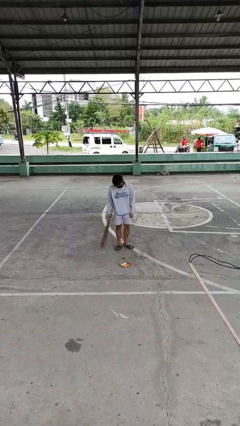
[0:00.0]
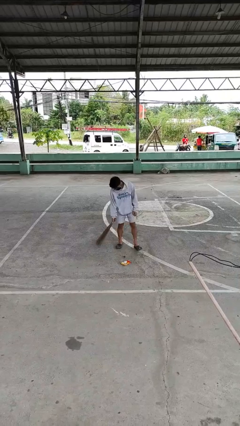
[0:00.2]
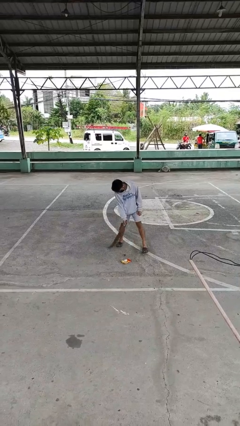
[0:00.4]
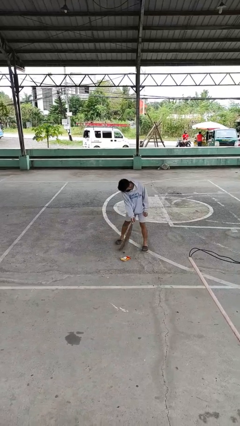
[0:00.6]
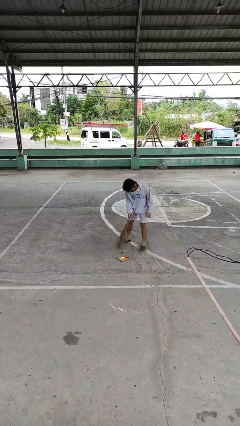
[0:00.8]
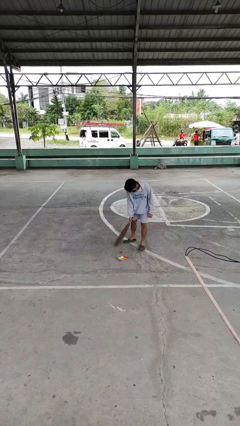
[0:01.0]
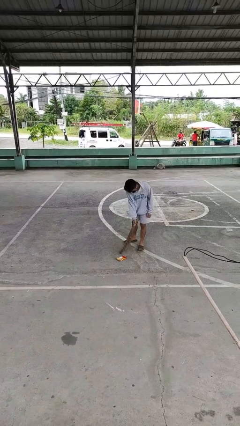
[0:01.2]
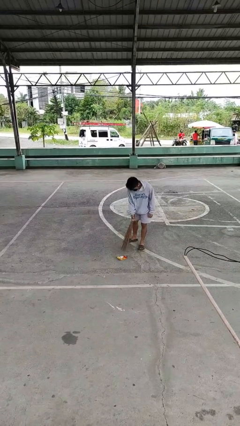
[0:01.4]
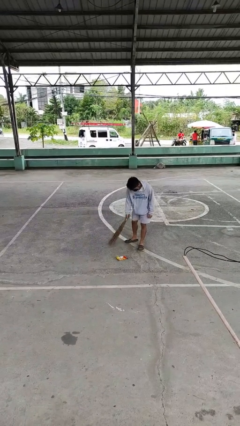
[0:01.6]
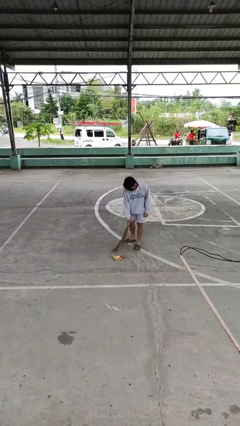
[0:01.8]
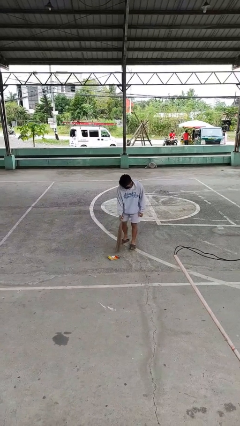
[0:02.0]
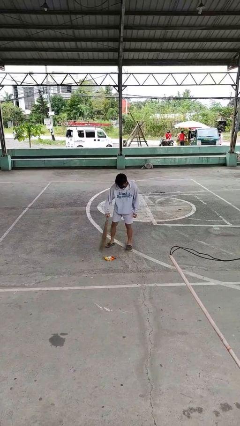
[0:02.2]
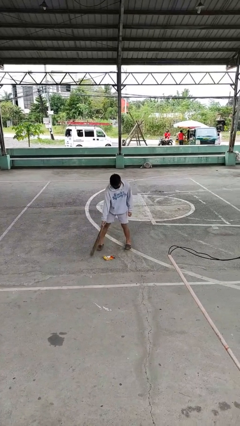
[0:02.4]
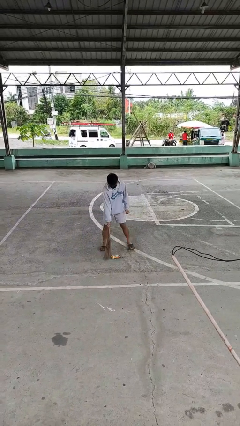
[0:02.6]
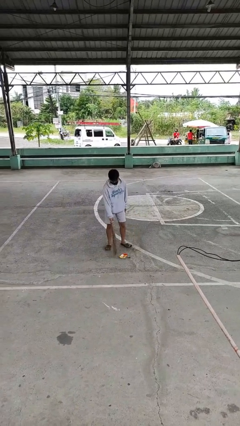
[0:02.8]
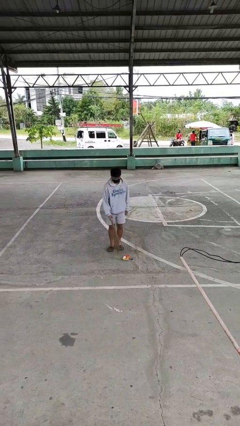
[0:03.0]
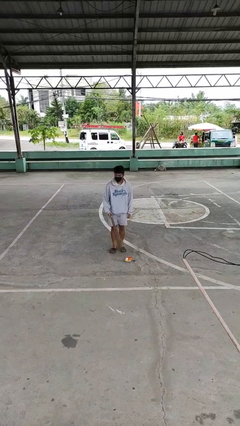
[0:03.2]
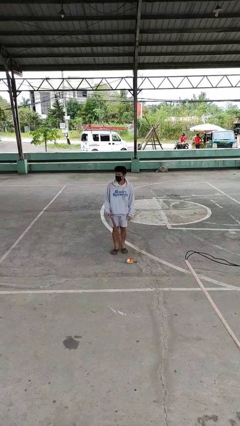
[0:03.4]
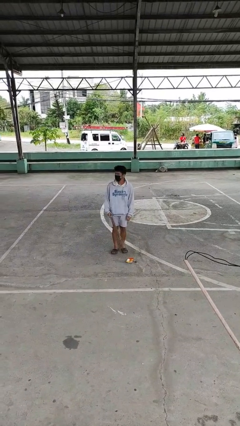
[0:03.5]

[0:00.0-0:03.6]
person sweeps floor

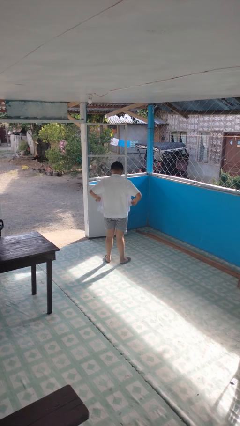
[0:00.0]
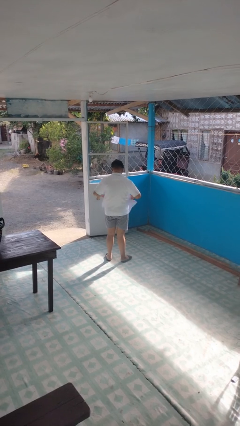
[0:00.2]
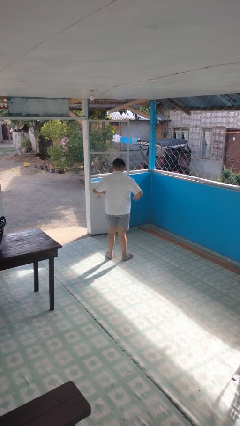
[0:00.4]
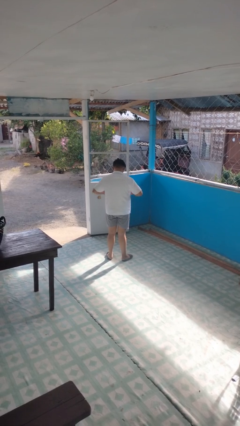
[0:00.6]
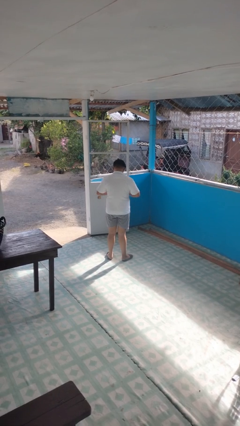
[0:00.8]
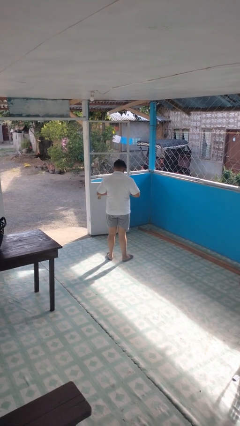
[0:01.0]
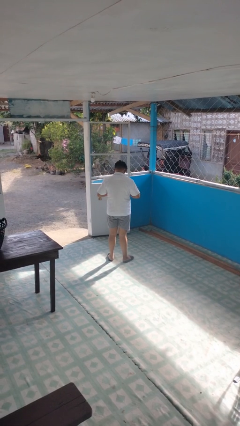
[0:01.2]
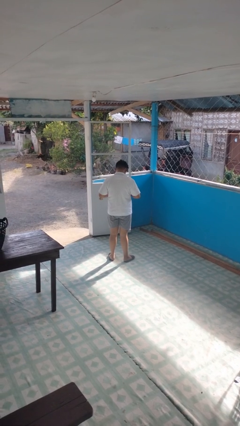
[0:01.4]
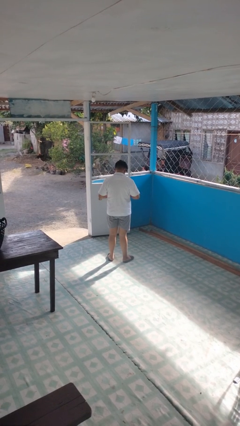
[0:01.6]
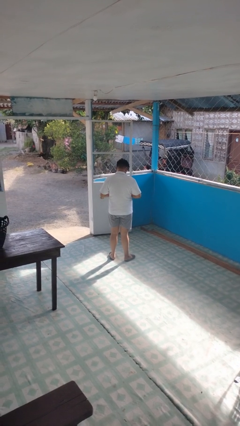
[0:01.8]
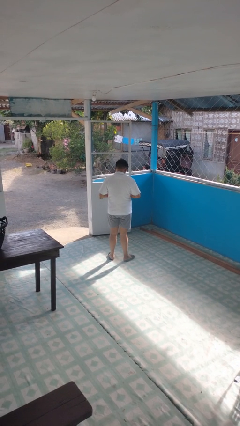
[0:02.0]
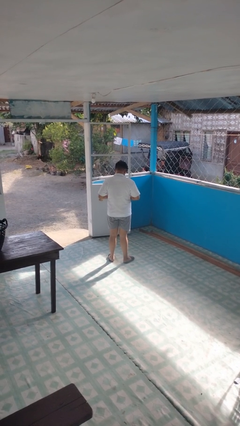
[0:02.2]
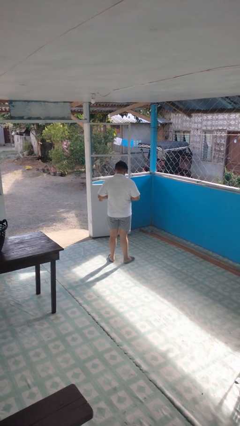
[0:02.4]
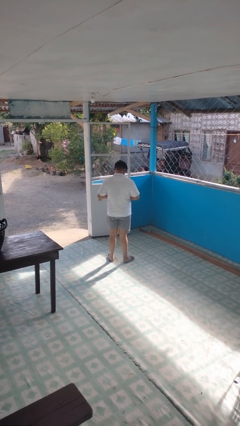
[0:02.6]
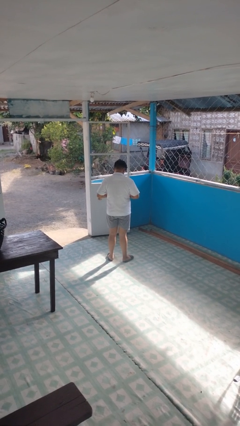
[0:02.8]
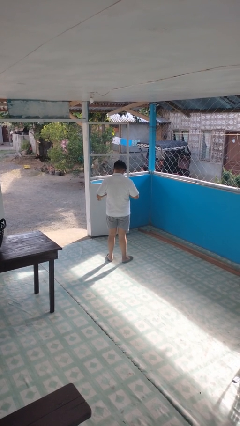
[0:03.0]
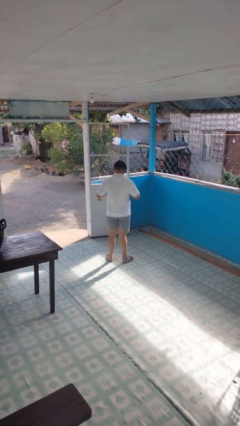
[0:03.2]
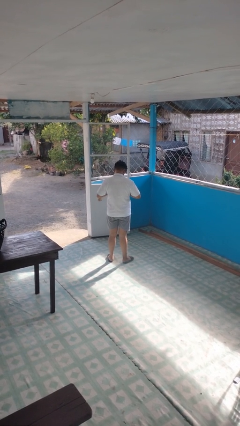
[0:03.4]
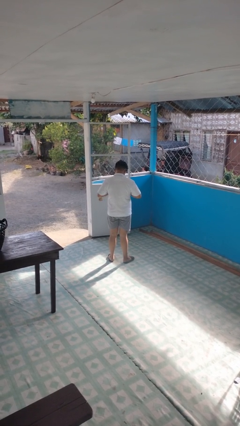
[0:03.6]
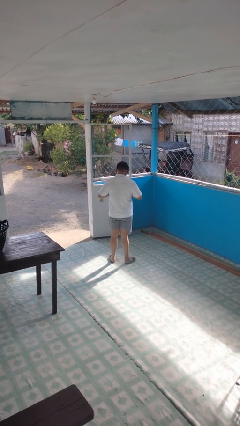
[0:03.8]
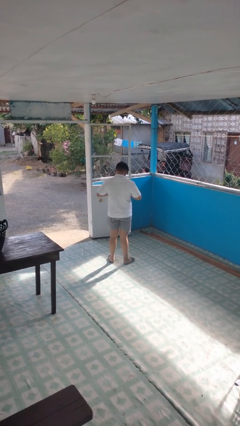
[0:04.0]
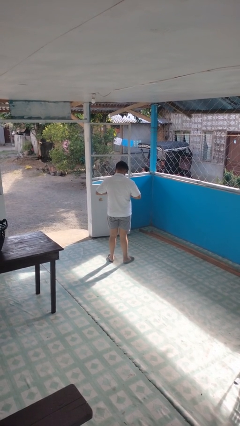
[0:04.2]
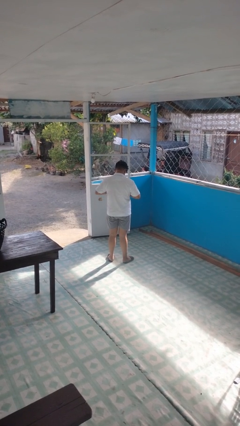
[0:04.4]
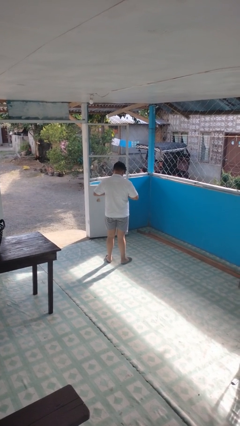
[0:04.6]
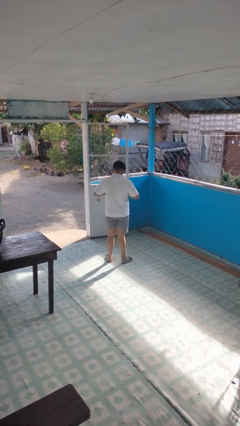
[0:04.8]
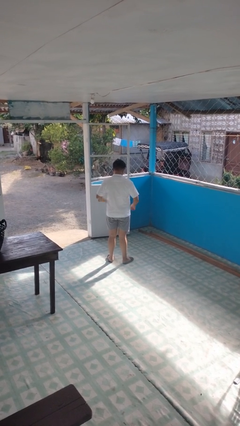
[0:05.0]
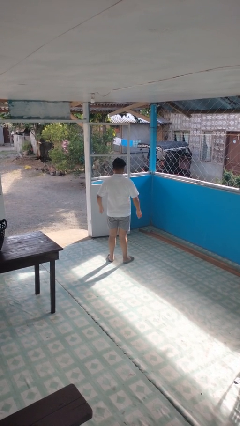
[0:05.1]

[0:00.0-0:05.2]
person buttons shirt

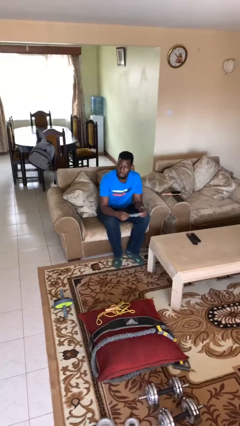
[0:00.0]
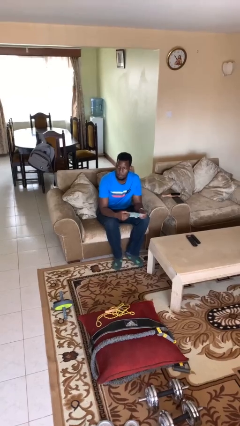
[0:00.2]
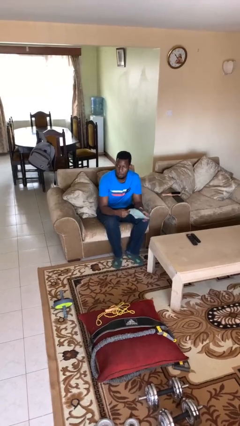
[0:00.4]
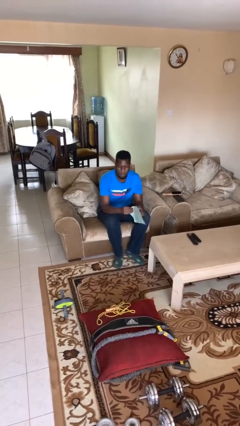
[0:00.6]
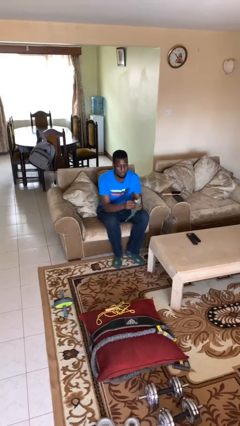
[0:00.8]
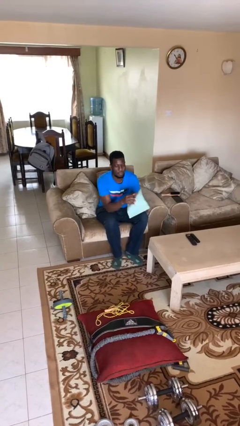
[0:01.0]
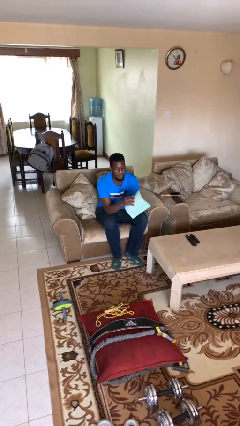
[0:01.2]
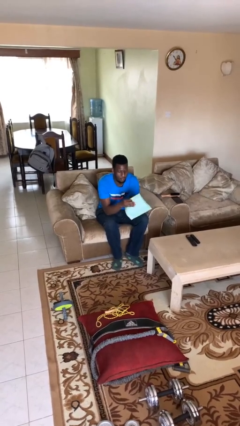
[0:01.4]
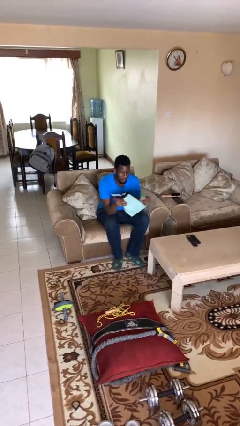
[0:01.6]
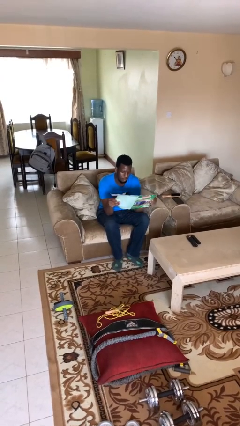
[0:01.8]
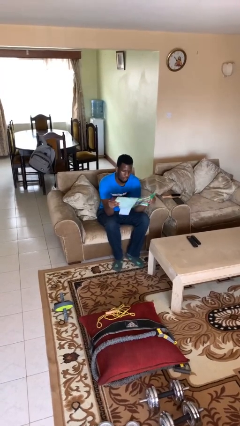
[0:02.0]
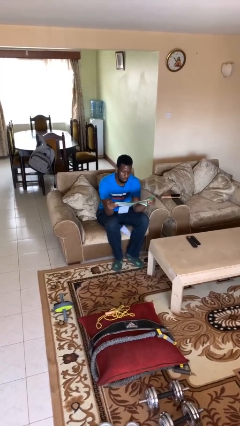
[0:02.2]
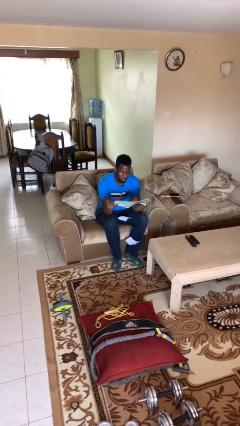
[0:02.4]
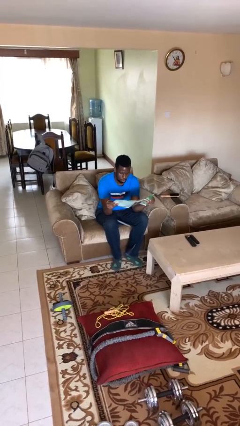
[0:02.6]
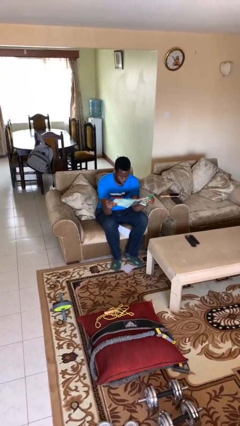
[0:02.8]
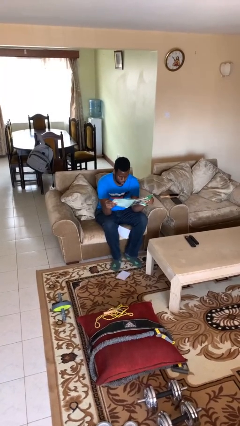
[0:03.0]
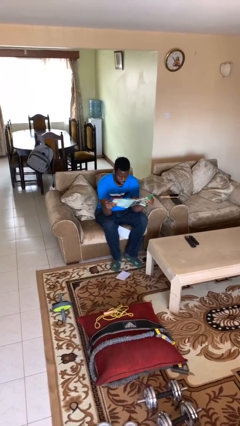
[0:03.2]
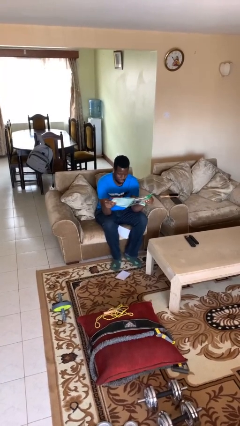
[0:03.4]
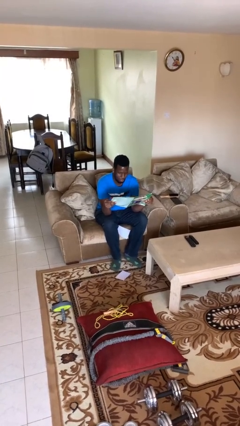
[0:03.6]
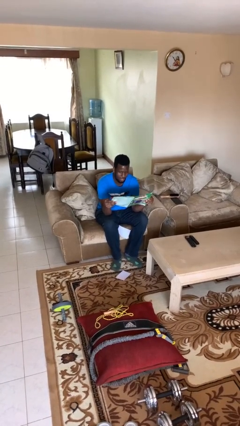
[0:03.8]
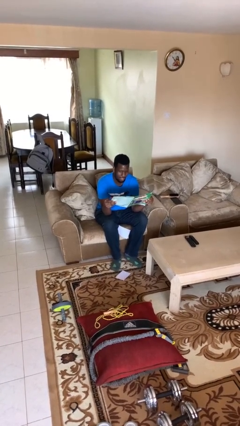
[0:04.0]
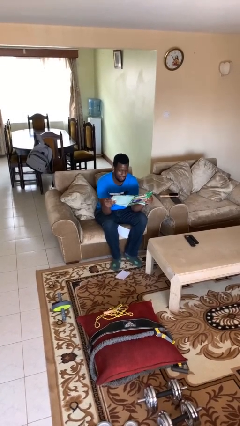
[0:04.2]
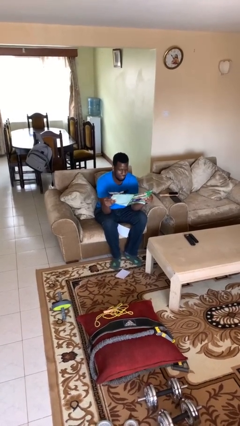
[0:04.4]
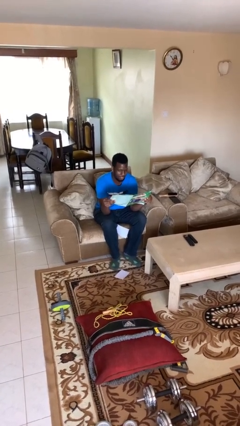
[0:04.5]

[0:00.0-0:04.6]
person reads document

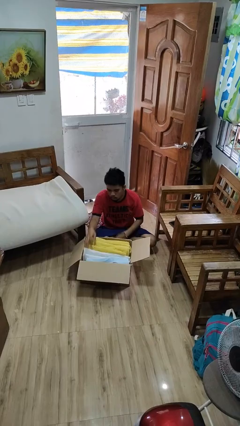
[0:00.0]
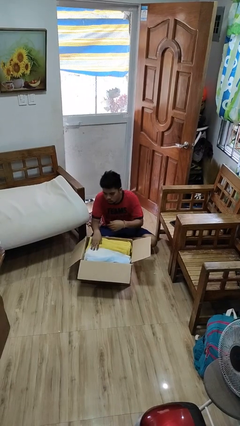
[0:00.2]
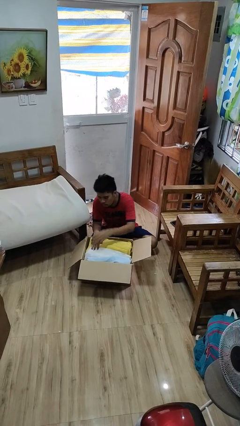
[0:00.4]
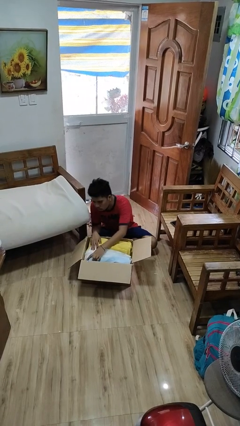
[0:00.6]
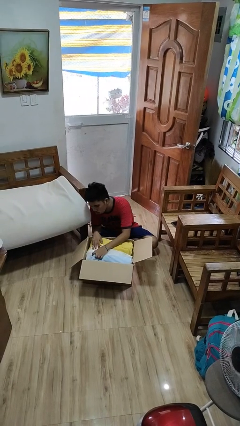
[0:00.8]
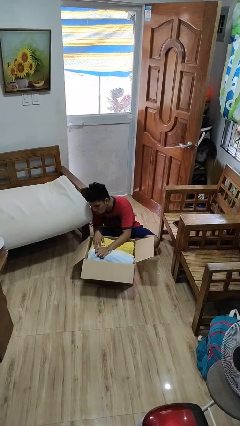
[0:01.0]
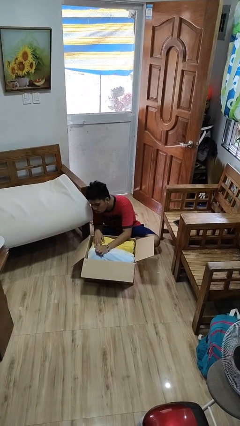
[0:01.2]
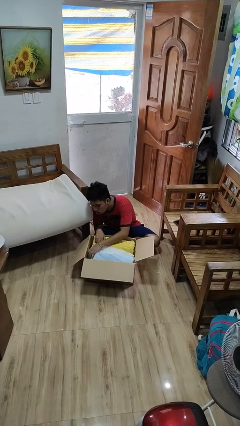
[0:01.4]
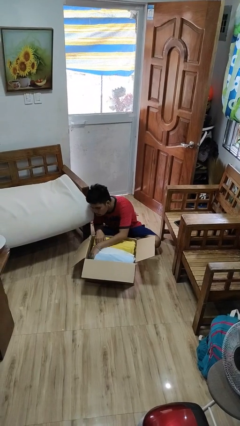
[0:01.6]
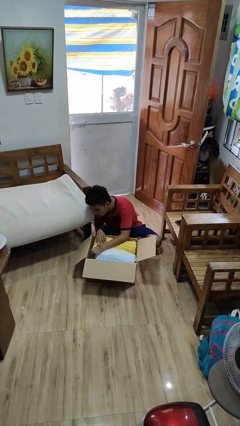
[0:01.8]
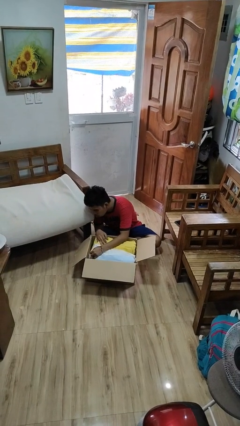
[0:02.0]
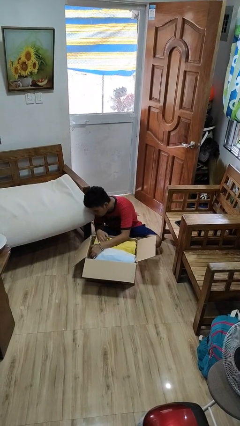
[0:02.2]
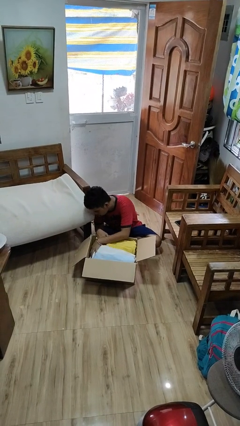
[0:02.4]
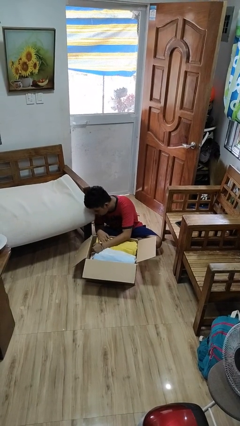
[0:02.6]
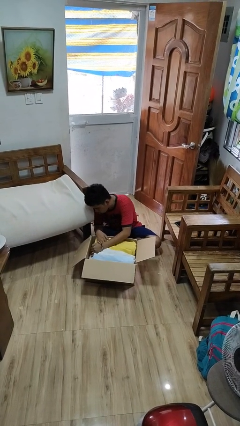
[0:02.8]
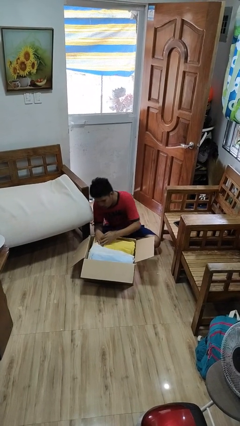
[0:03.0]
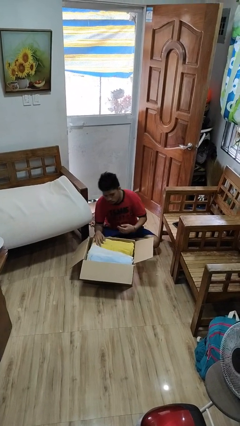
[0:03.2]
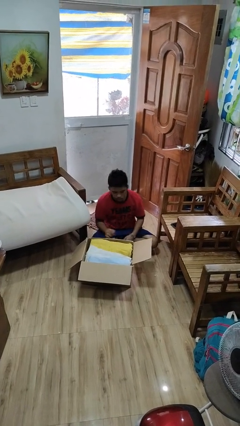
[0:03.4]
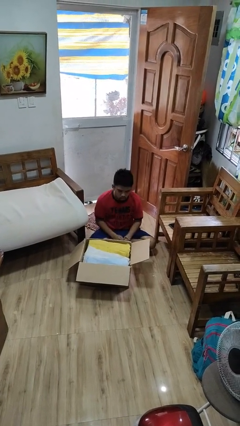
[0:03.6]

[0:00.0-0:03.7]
person searches in box

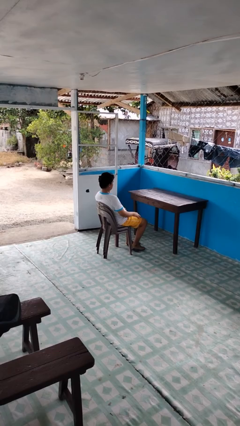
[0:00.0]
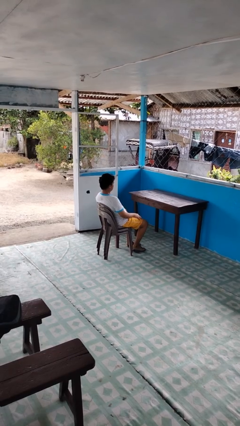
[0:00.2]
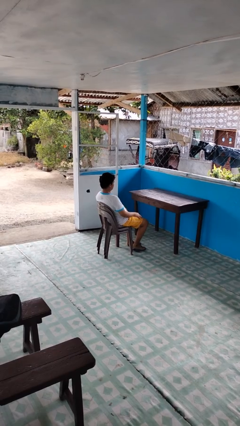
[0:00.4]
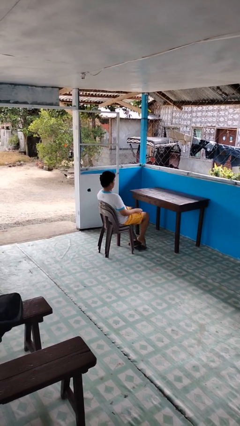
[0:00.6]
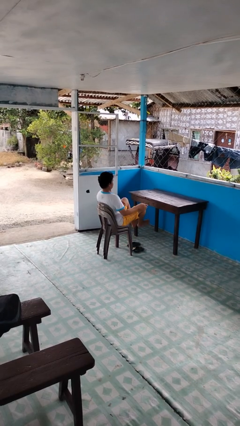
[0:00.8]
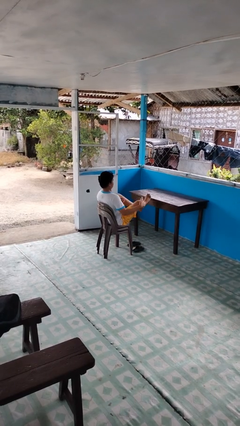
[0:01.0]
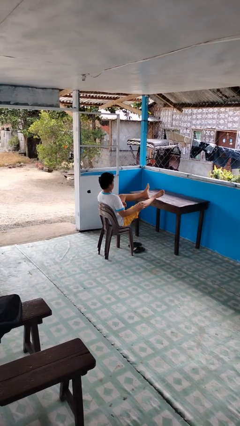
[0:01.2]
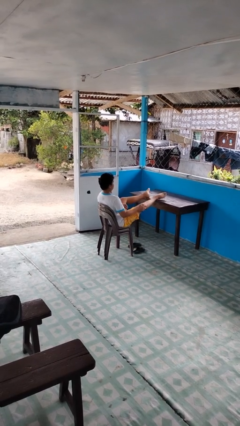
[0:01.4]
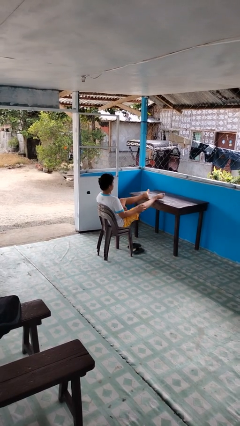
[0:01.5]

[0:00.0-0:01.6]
person puts feet up
